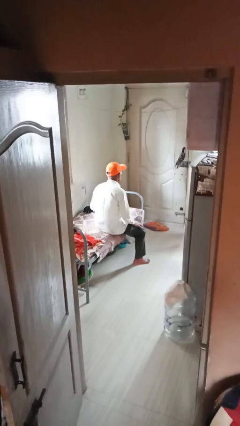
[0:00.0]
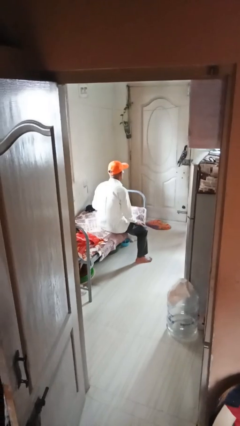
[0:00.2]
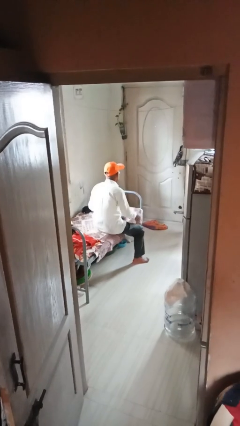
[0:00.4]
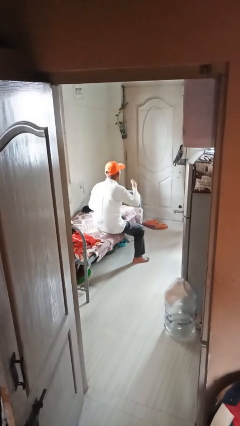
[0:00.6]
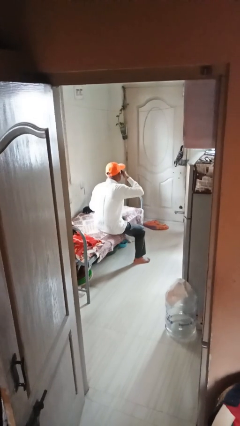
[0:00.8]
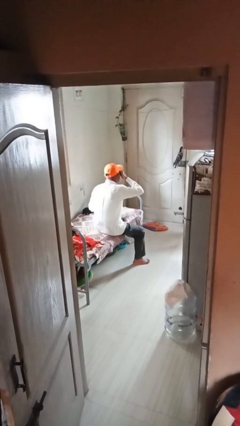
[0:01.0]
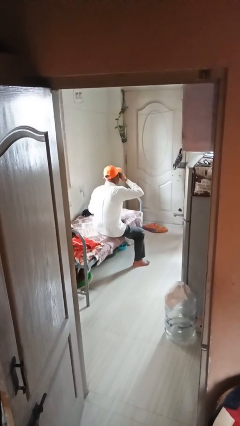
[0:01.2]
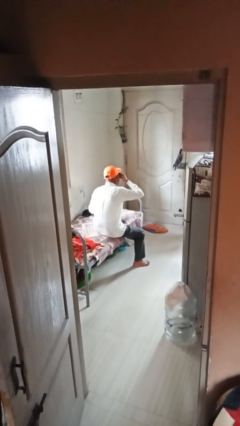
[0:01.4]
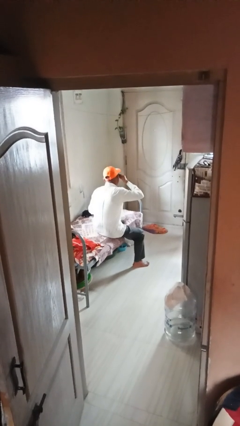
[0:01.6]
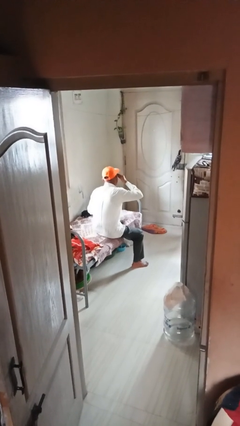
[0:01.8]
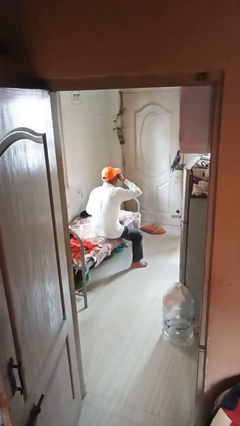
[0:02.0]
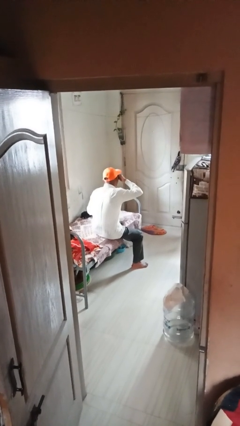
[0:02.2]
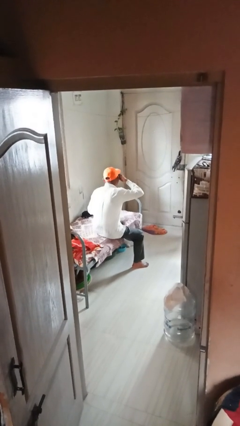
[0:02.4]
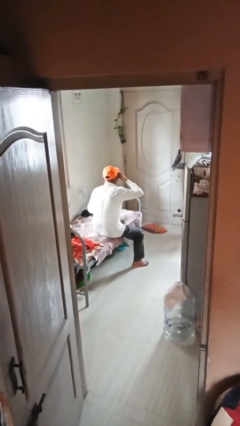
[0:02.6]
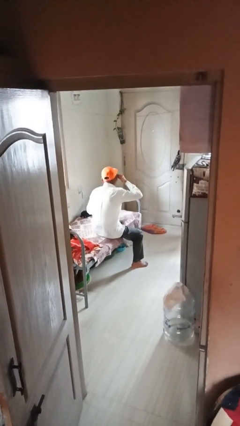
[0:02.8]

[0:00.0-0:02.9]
person rubs eyes

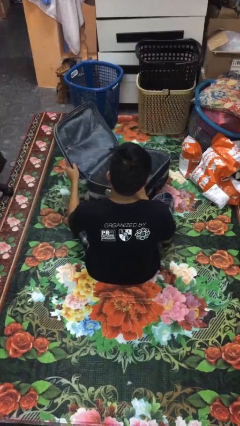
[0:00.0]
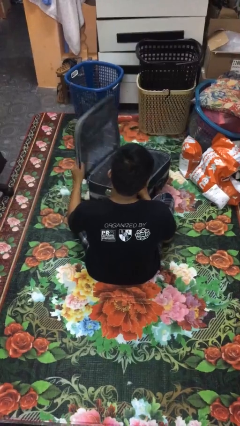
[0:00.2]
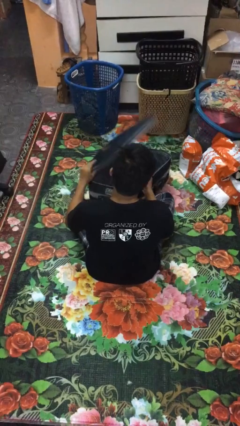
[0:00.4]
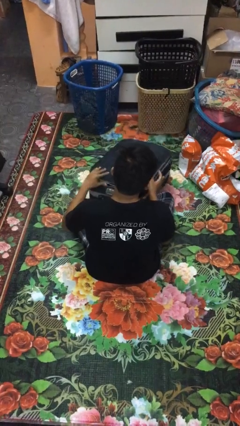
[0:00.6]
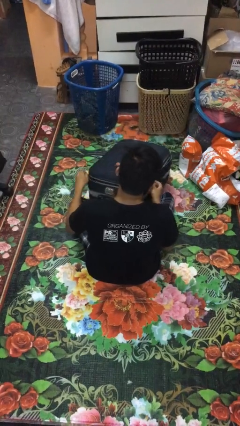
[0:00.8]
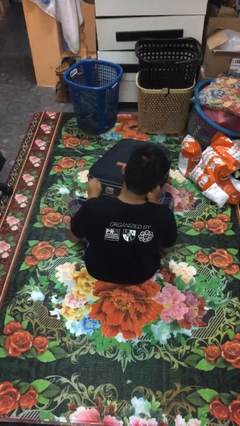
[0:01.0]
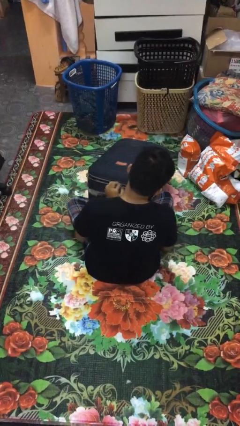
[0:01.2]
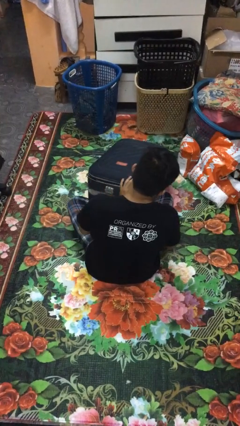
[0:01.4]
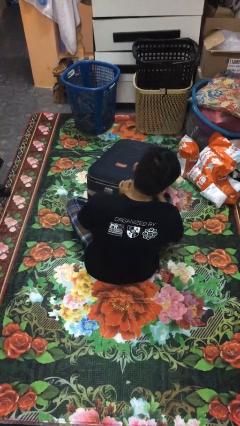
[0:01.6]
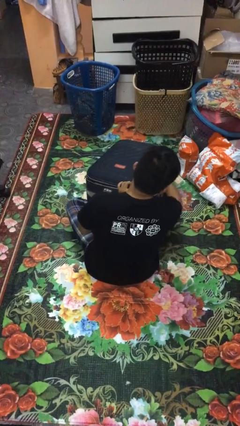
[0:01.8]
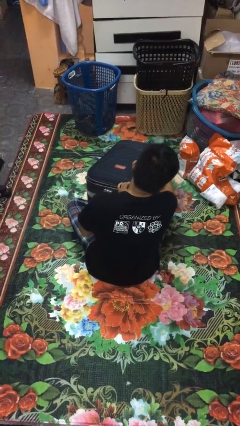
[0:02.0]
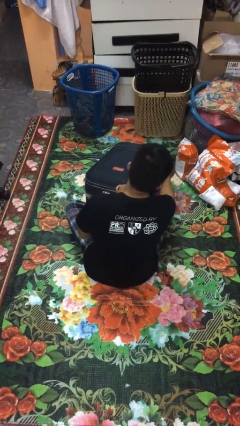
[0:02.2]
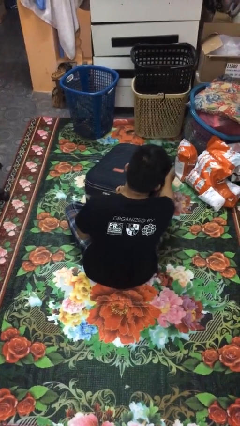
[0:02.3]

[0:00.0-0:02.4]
person closes suitcase

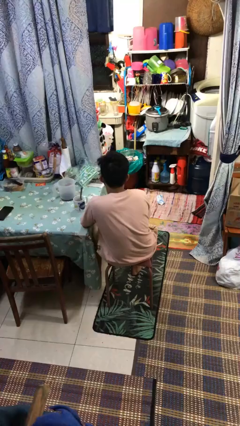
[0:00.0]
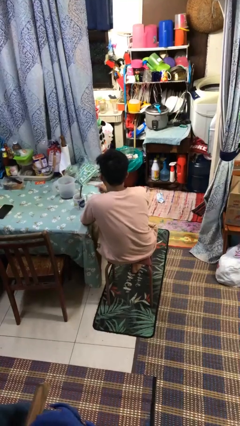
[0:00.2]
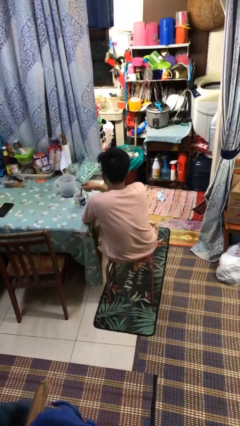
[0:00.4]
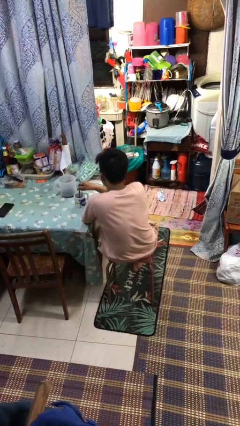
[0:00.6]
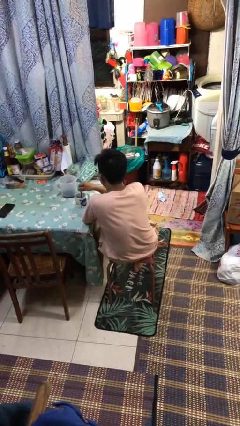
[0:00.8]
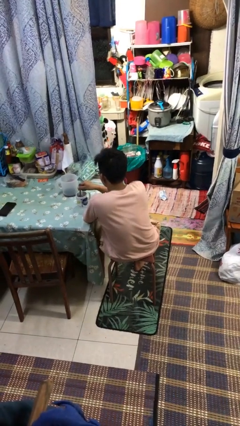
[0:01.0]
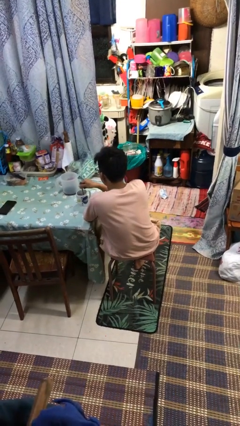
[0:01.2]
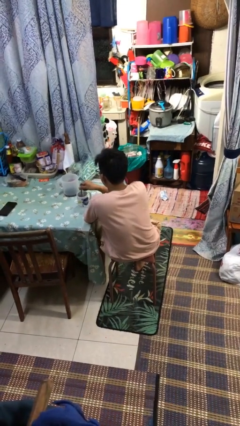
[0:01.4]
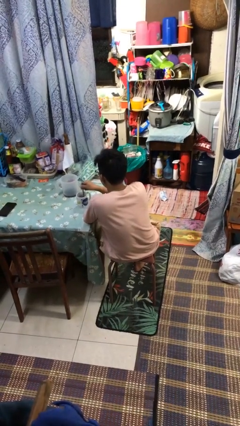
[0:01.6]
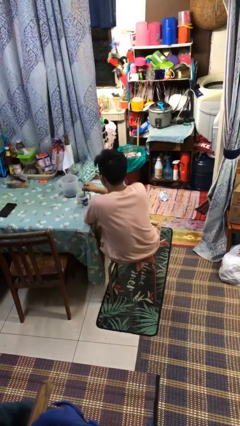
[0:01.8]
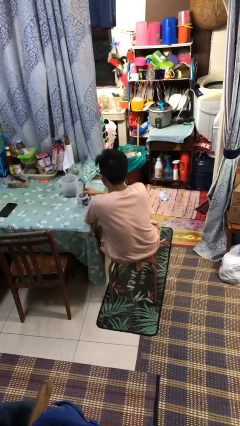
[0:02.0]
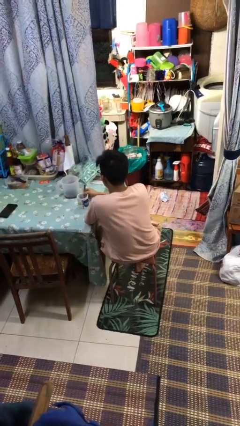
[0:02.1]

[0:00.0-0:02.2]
person stirs mug

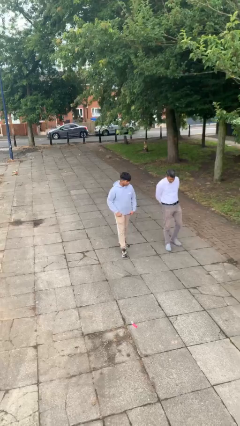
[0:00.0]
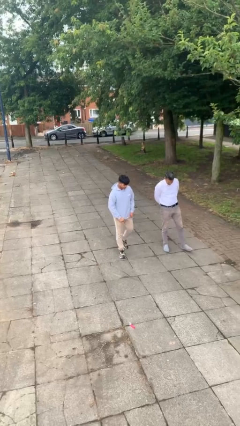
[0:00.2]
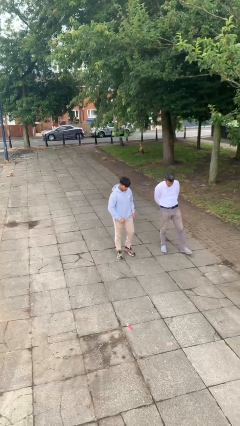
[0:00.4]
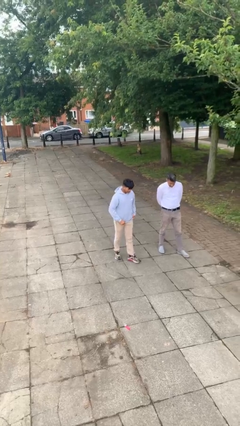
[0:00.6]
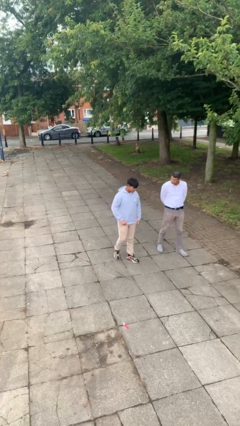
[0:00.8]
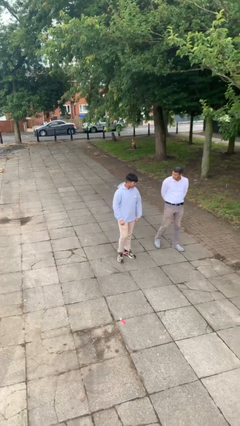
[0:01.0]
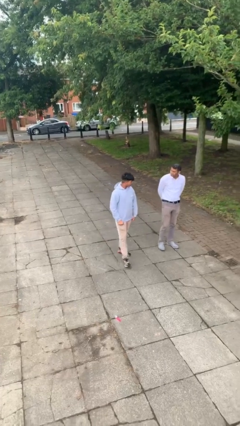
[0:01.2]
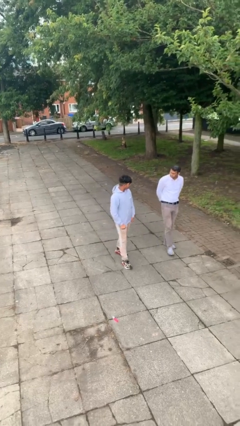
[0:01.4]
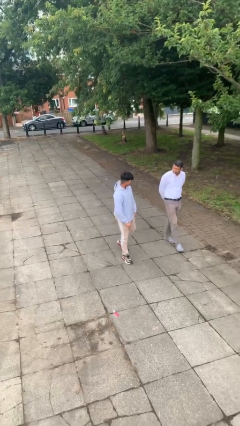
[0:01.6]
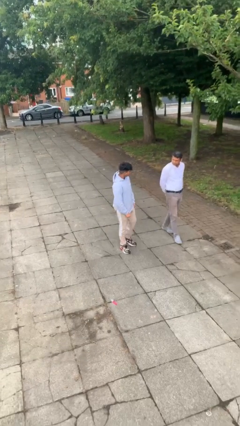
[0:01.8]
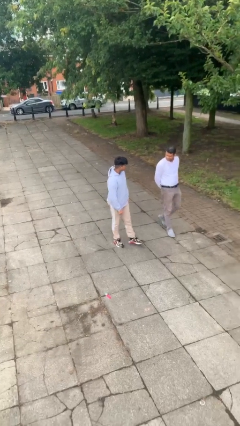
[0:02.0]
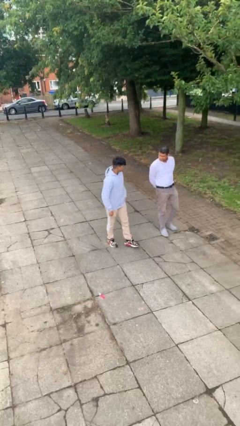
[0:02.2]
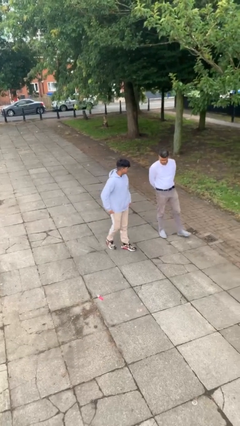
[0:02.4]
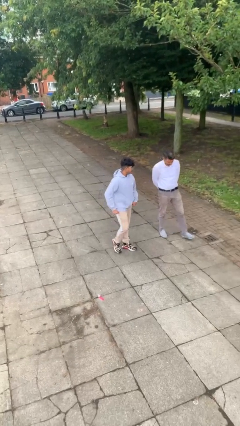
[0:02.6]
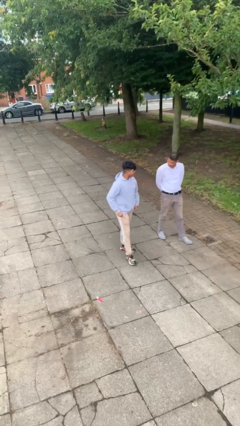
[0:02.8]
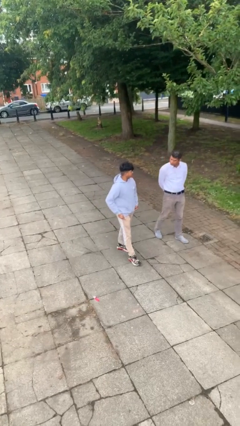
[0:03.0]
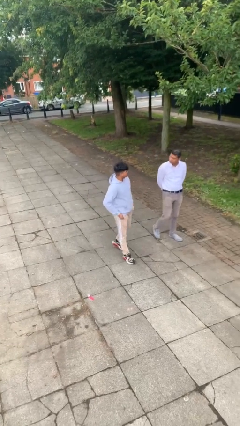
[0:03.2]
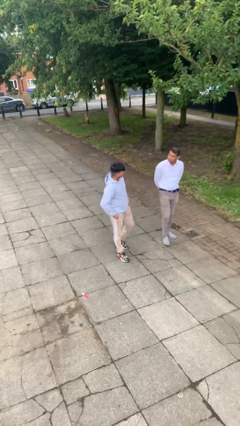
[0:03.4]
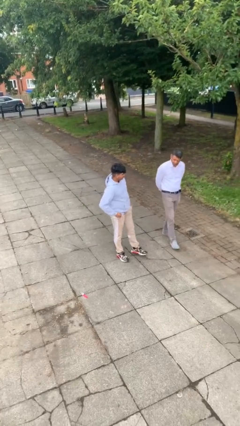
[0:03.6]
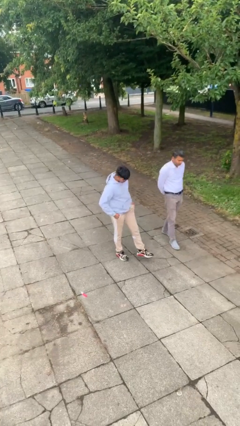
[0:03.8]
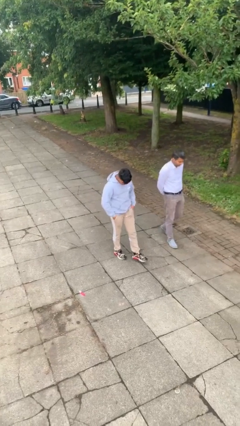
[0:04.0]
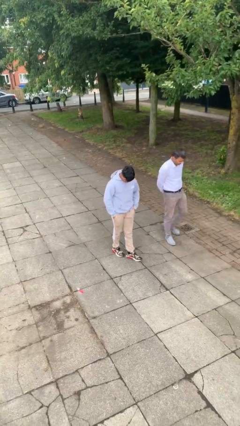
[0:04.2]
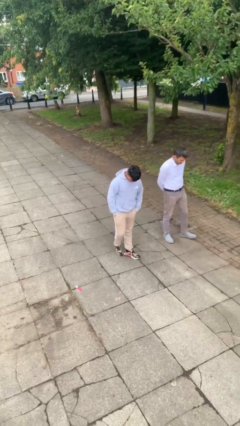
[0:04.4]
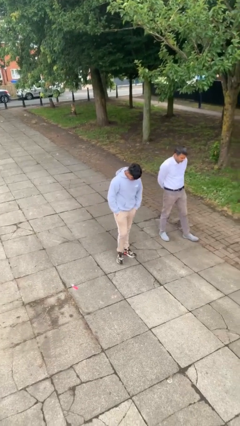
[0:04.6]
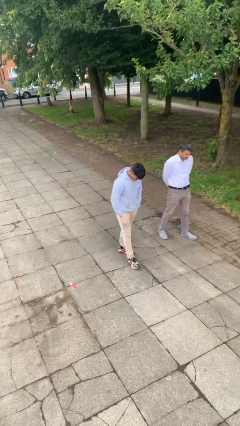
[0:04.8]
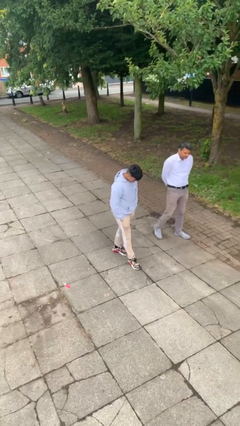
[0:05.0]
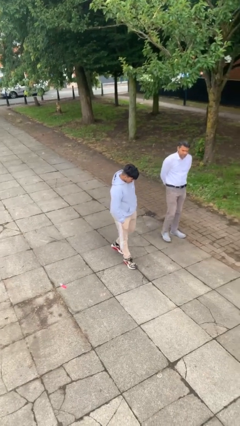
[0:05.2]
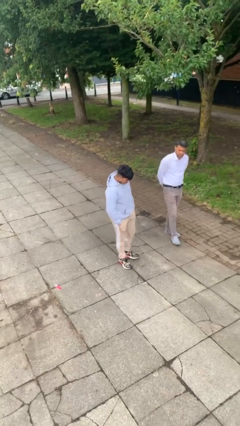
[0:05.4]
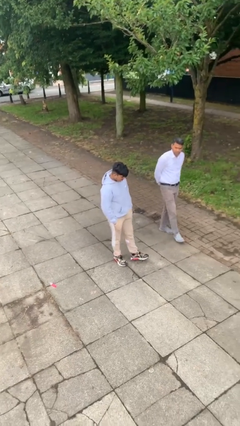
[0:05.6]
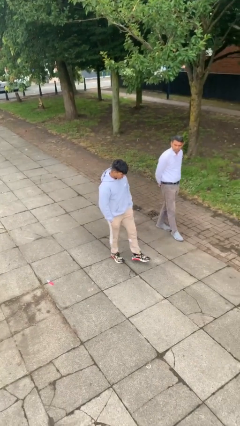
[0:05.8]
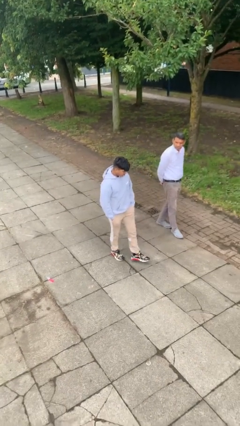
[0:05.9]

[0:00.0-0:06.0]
person talks to person

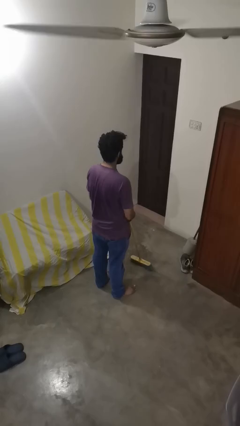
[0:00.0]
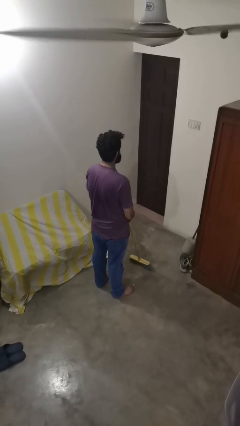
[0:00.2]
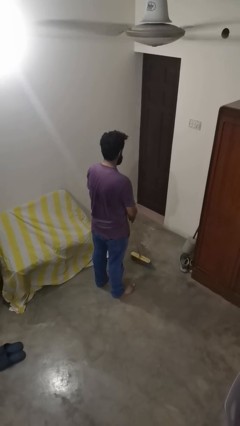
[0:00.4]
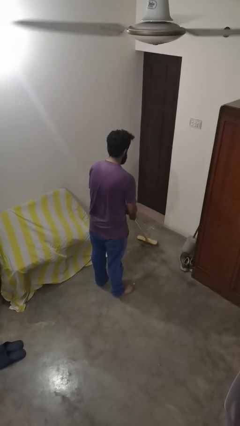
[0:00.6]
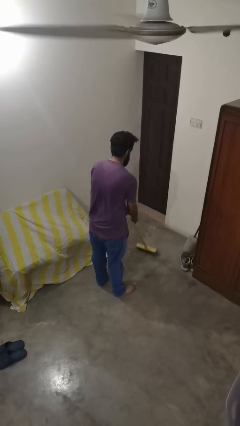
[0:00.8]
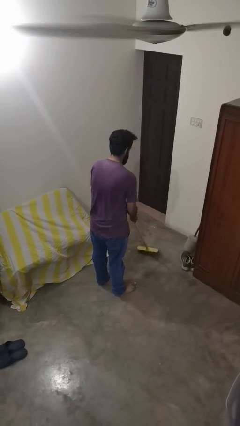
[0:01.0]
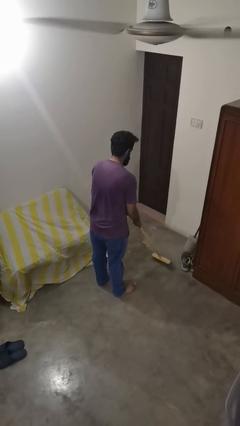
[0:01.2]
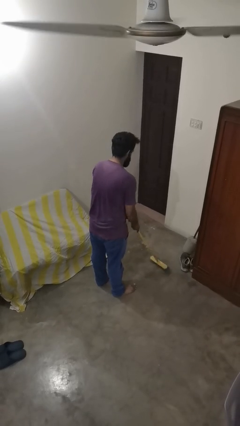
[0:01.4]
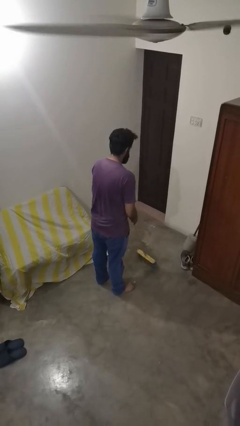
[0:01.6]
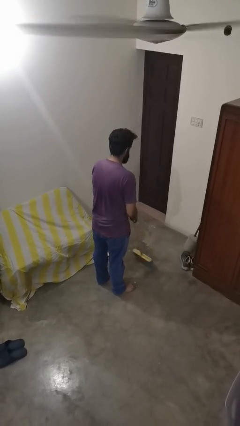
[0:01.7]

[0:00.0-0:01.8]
person sweeps floor

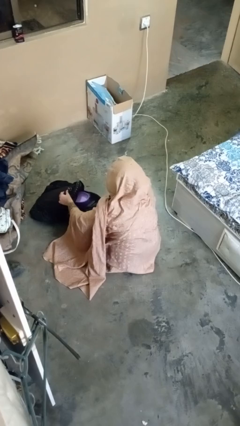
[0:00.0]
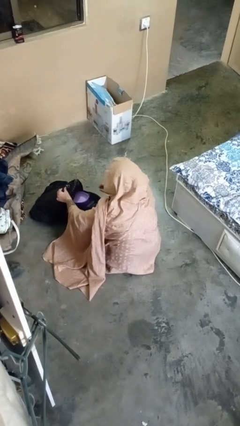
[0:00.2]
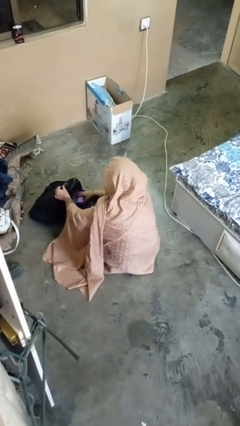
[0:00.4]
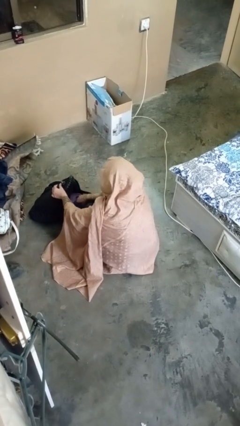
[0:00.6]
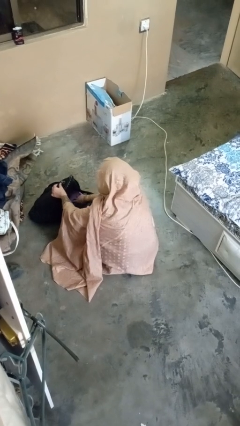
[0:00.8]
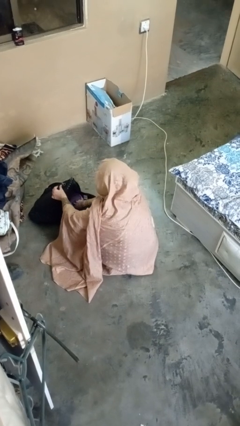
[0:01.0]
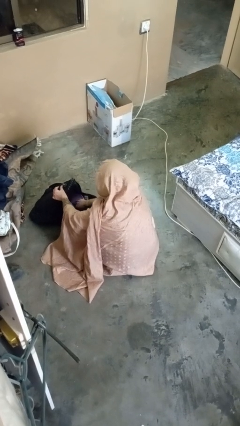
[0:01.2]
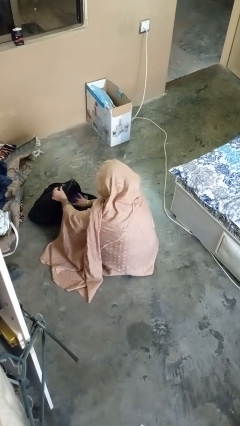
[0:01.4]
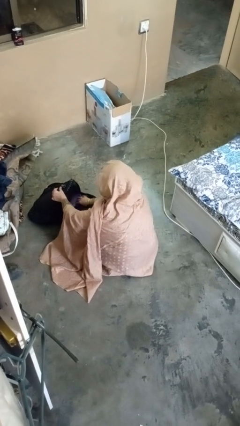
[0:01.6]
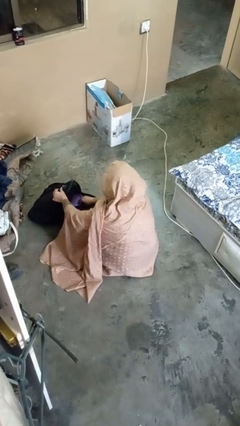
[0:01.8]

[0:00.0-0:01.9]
person searches in backpack

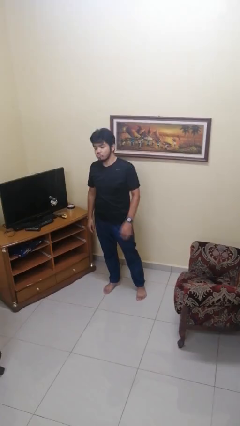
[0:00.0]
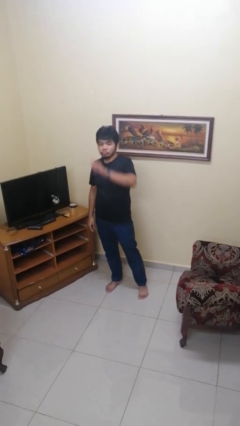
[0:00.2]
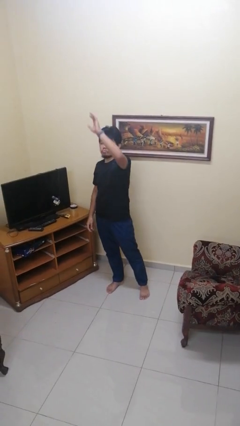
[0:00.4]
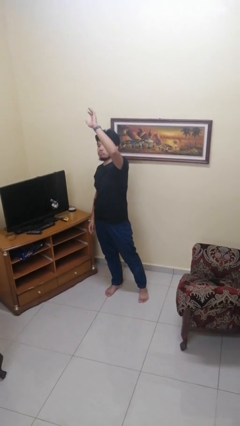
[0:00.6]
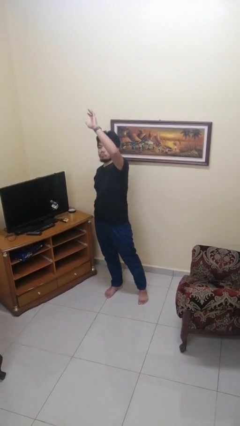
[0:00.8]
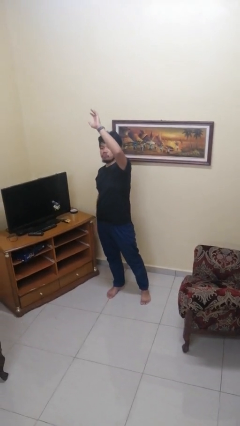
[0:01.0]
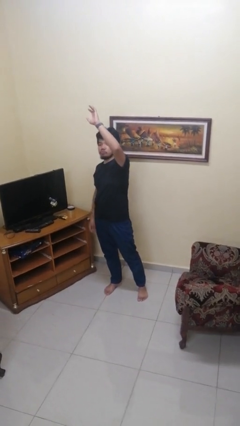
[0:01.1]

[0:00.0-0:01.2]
person gestures raise hand
